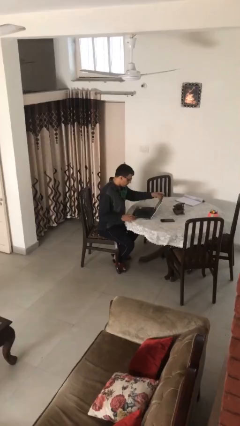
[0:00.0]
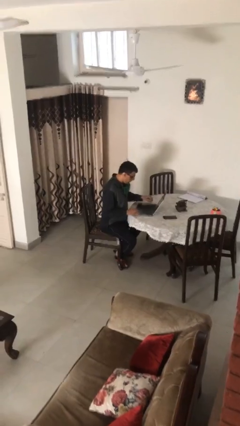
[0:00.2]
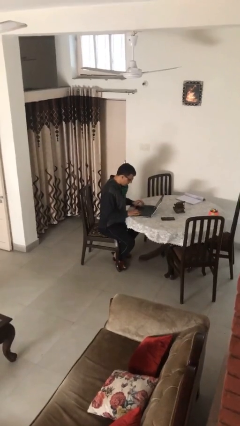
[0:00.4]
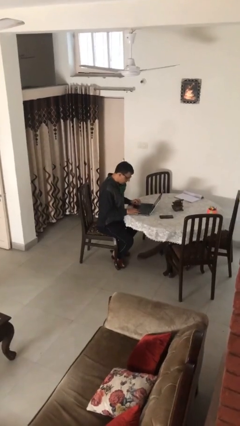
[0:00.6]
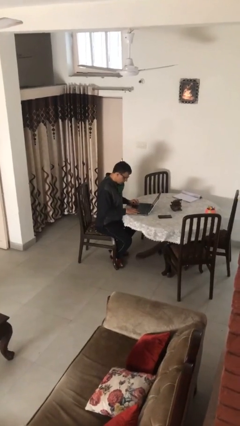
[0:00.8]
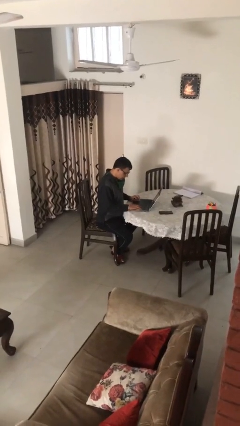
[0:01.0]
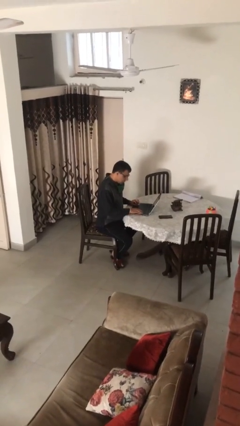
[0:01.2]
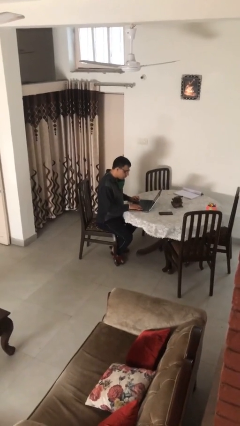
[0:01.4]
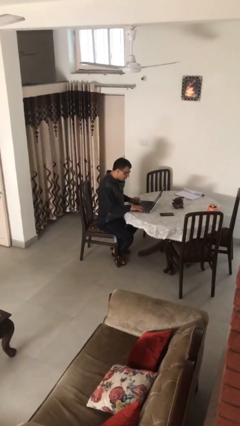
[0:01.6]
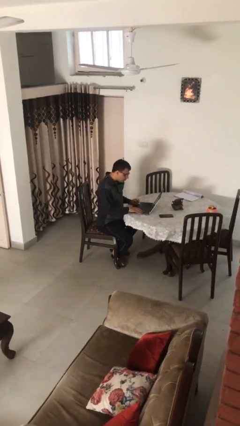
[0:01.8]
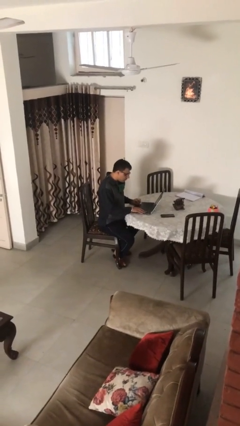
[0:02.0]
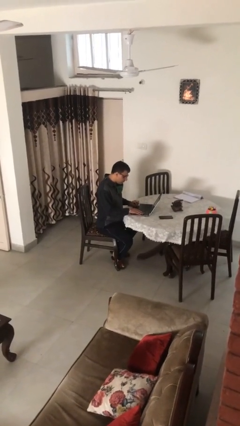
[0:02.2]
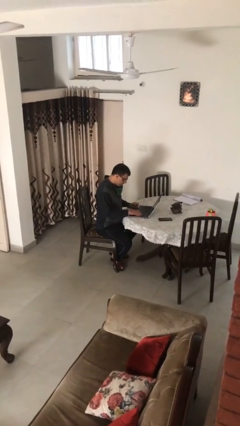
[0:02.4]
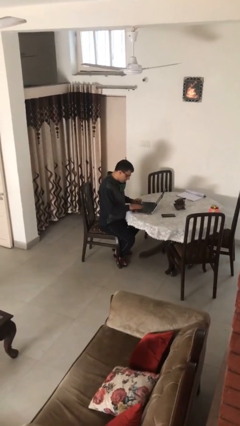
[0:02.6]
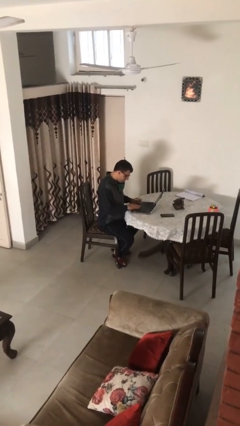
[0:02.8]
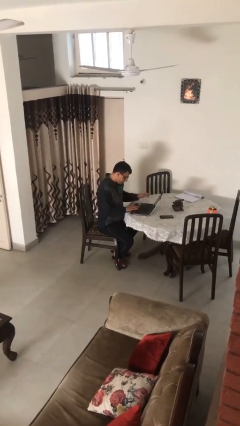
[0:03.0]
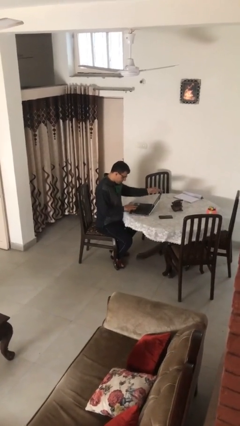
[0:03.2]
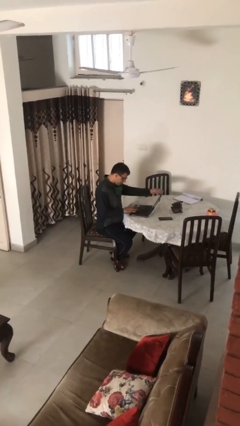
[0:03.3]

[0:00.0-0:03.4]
person interacts with laptop

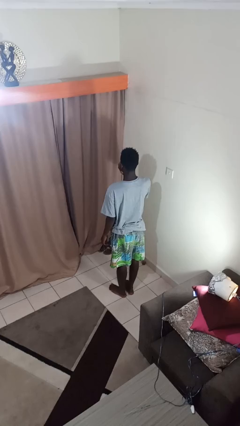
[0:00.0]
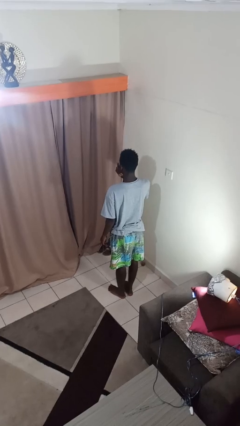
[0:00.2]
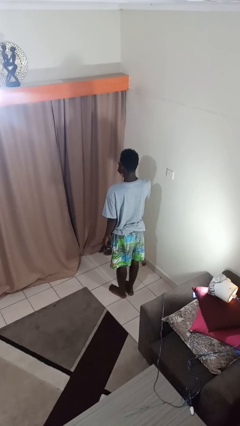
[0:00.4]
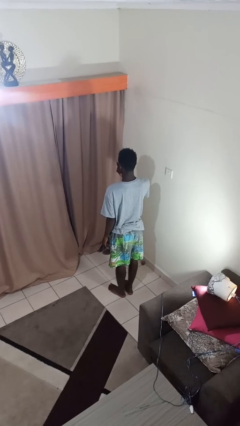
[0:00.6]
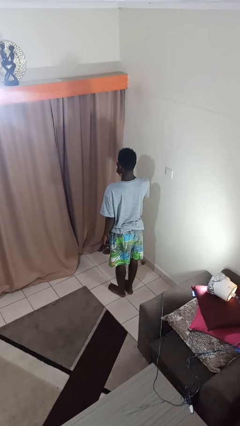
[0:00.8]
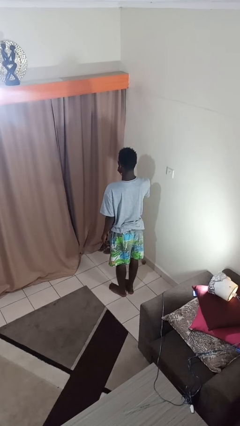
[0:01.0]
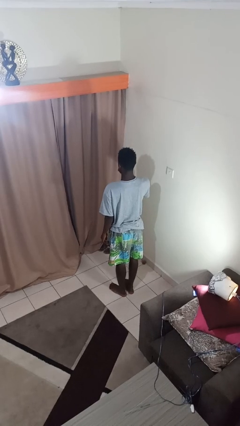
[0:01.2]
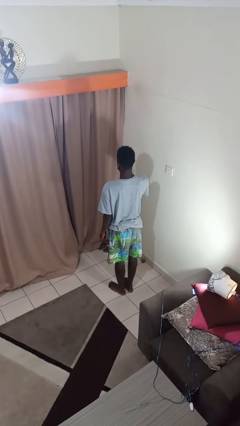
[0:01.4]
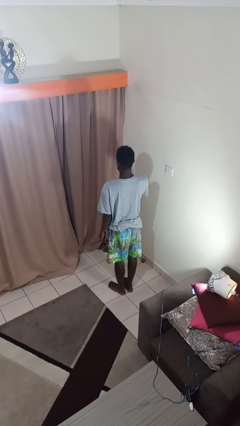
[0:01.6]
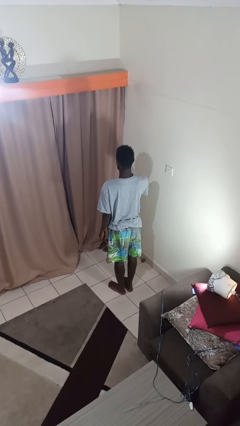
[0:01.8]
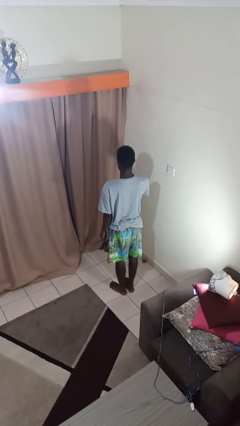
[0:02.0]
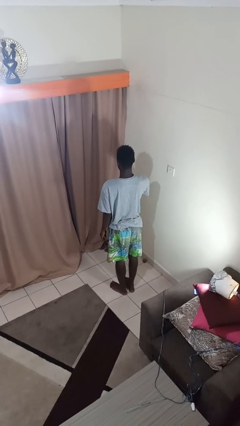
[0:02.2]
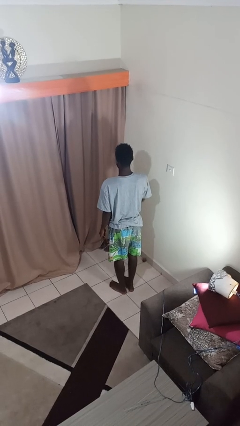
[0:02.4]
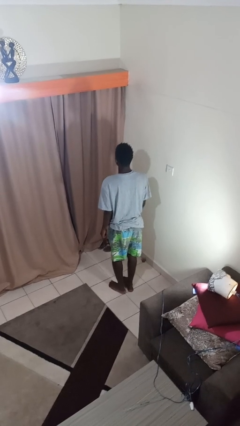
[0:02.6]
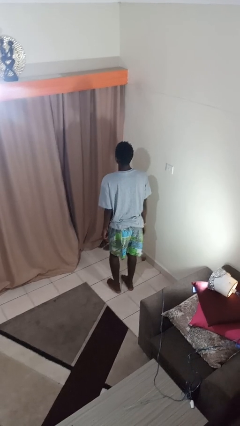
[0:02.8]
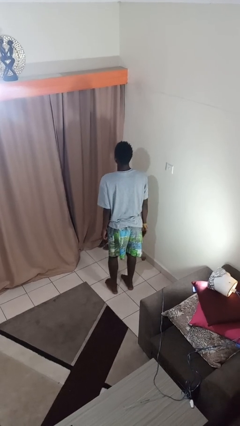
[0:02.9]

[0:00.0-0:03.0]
person gestures number three

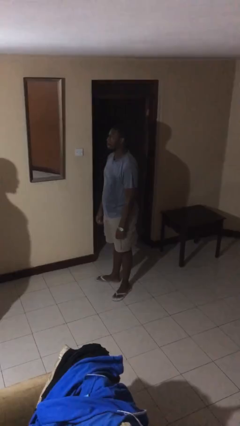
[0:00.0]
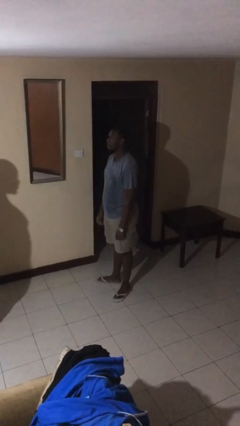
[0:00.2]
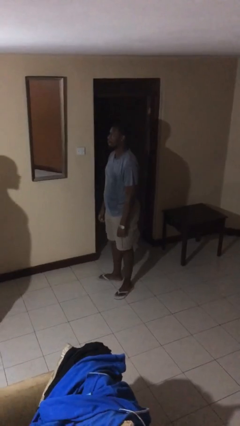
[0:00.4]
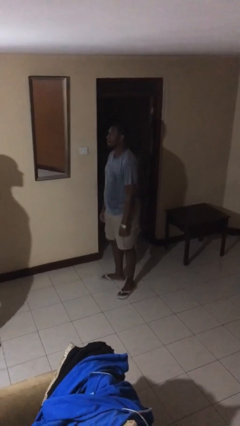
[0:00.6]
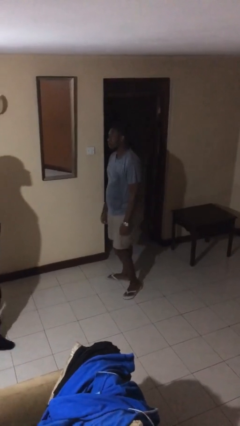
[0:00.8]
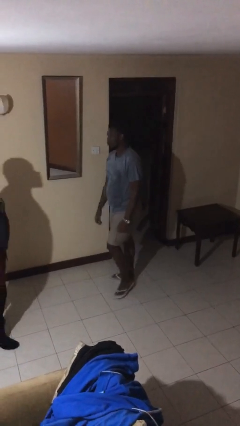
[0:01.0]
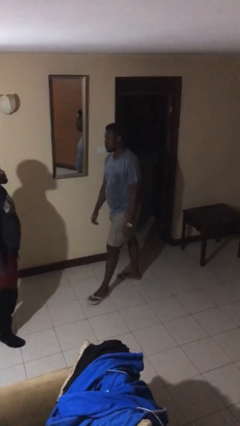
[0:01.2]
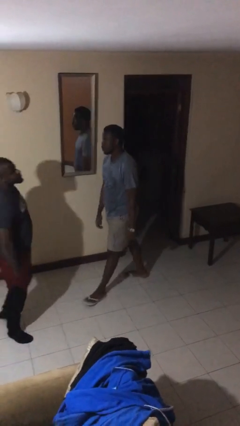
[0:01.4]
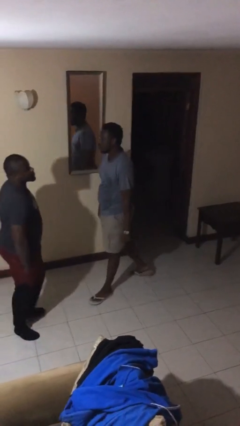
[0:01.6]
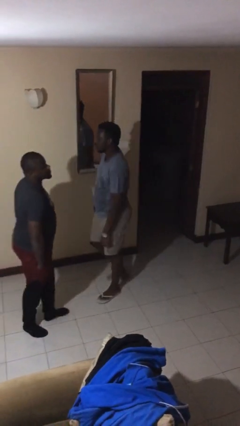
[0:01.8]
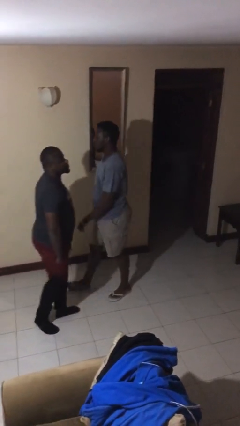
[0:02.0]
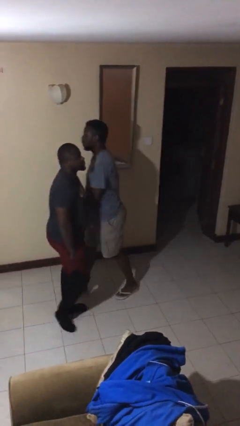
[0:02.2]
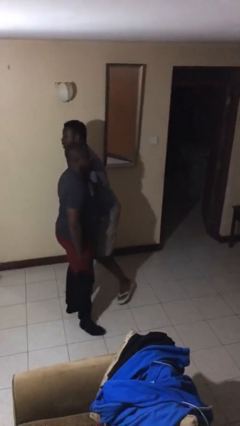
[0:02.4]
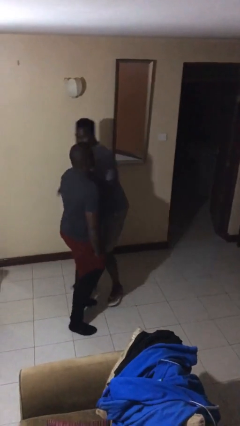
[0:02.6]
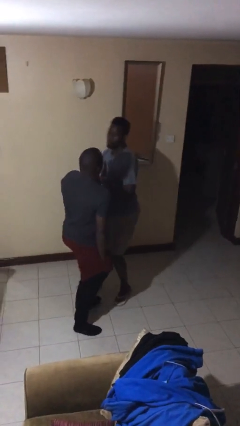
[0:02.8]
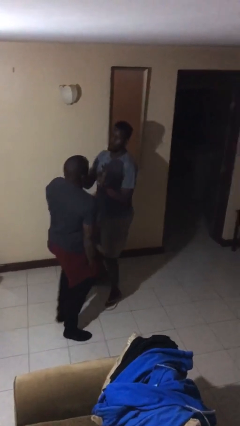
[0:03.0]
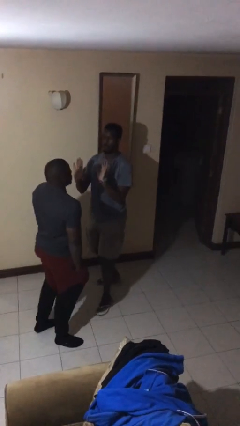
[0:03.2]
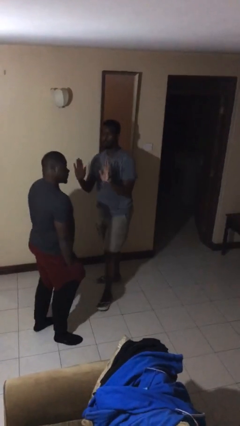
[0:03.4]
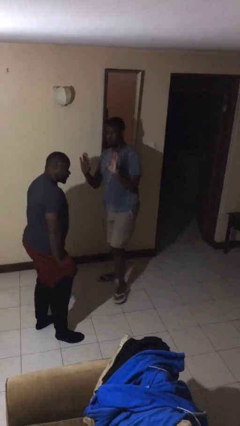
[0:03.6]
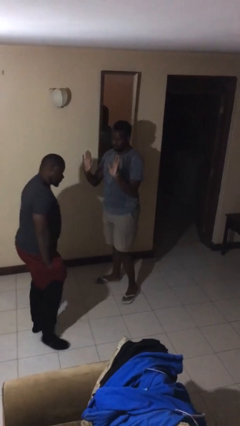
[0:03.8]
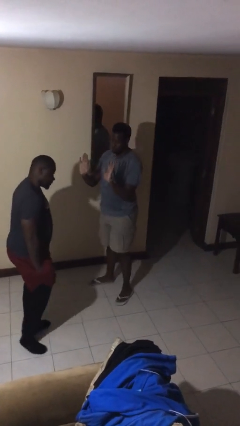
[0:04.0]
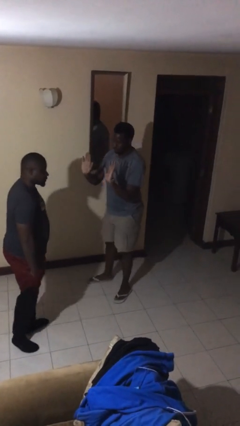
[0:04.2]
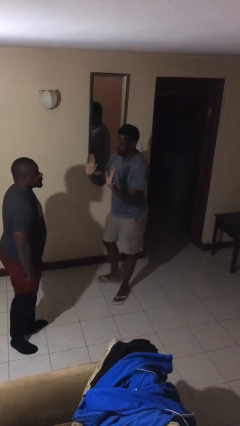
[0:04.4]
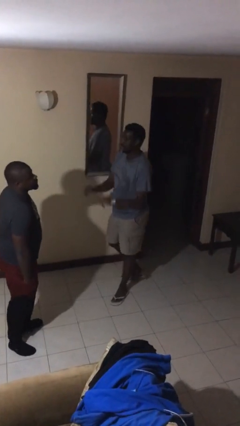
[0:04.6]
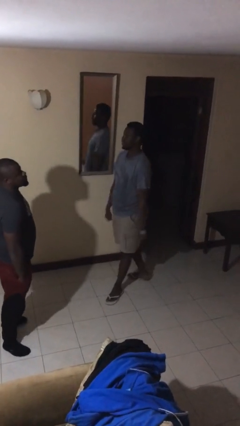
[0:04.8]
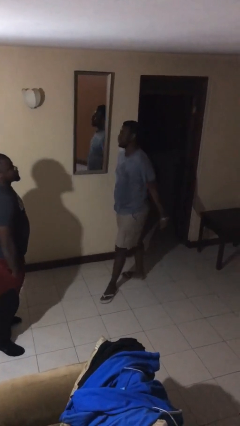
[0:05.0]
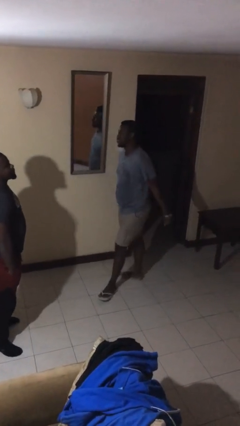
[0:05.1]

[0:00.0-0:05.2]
person bumps into person

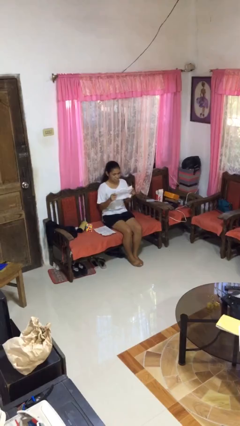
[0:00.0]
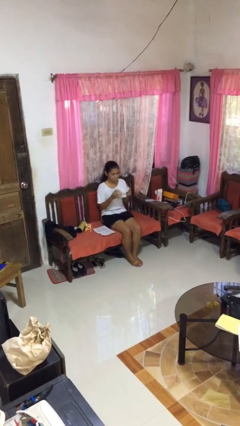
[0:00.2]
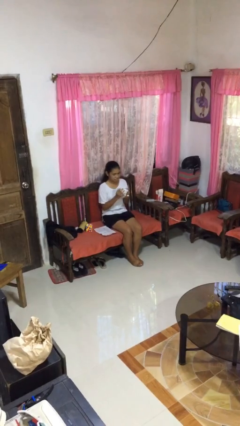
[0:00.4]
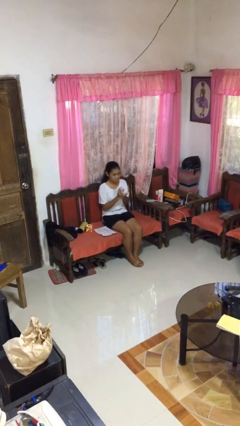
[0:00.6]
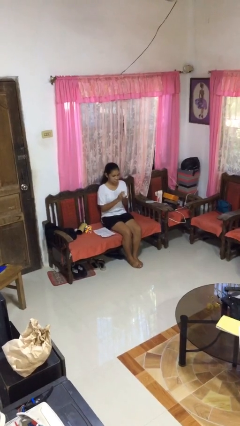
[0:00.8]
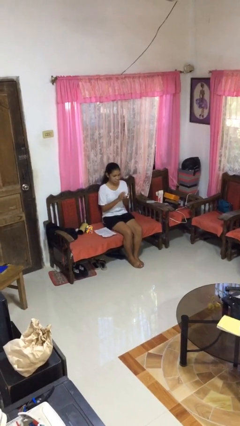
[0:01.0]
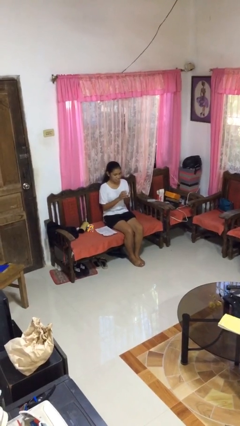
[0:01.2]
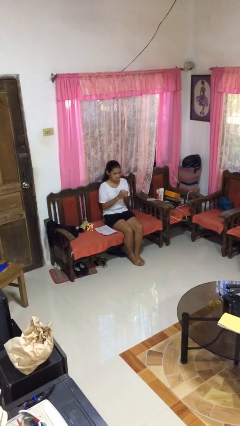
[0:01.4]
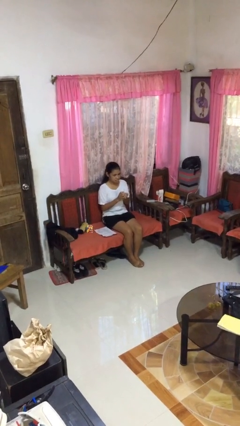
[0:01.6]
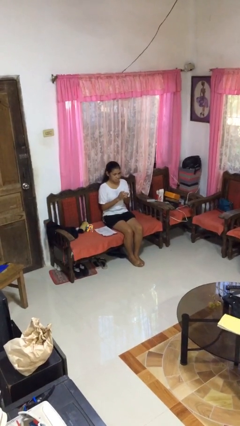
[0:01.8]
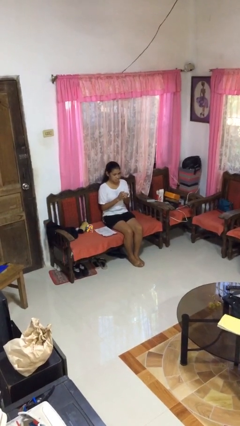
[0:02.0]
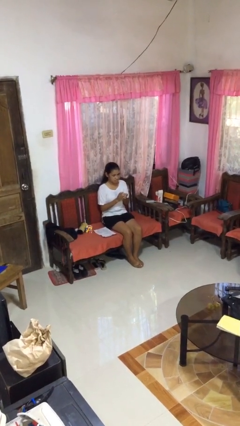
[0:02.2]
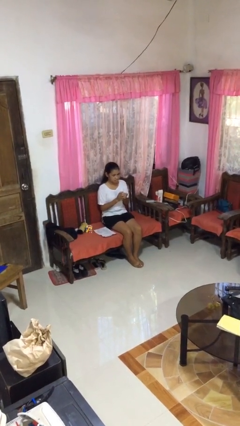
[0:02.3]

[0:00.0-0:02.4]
person crumples paper

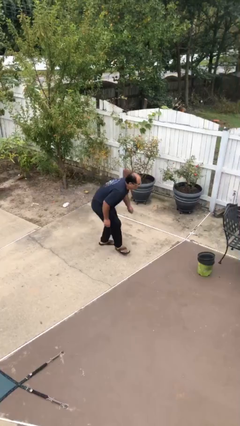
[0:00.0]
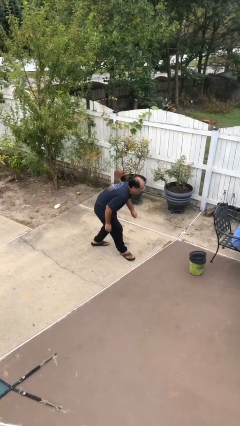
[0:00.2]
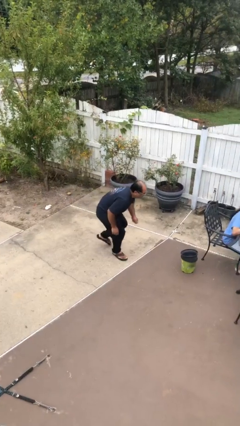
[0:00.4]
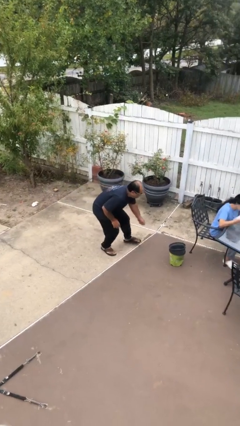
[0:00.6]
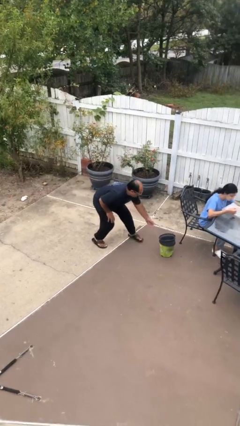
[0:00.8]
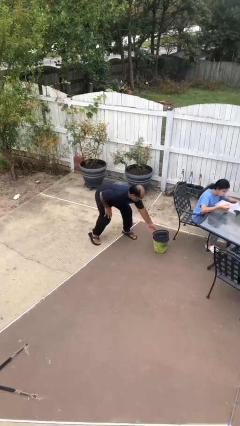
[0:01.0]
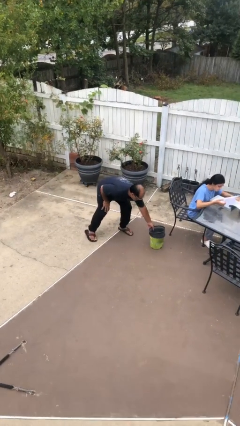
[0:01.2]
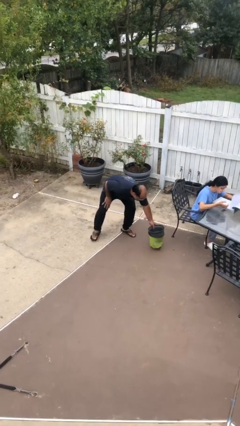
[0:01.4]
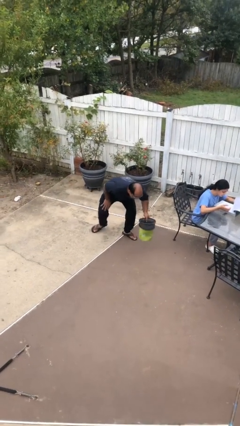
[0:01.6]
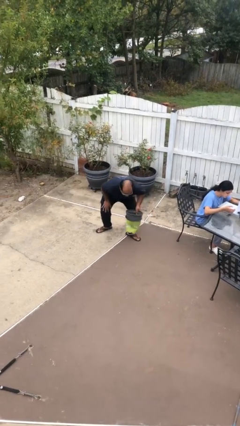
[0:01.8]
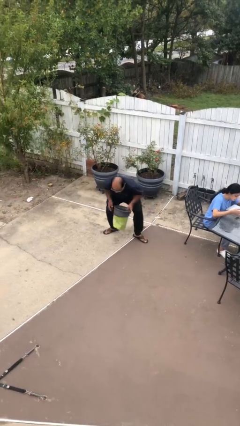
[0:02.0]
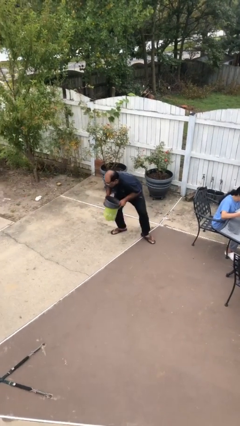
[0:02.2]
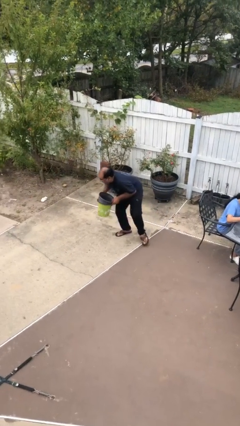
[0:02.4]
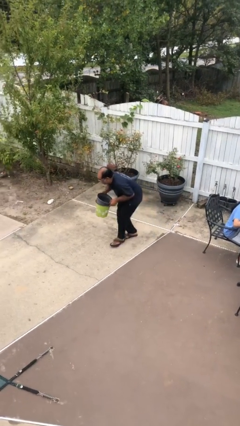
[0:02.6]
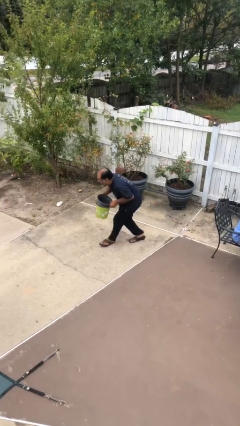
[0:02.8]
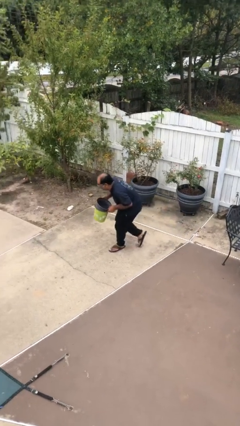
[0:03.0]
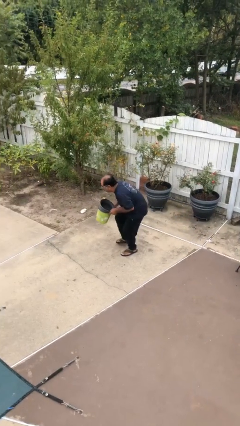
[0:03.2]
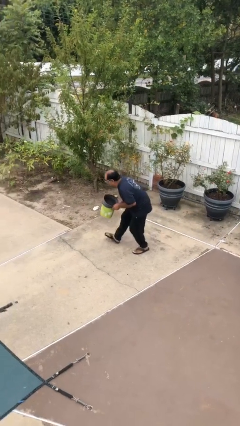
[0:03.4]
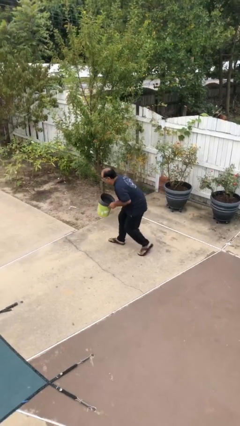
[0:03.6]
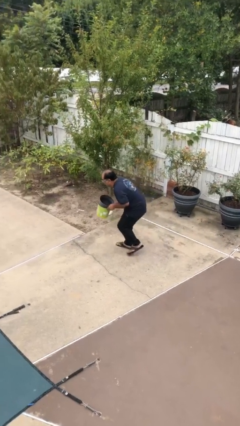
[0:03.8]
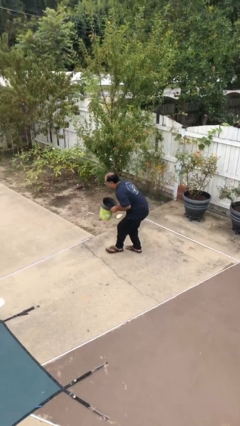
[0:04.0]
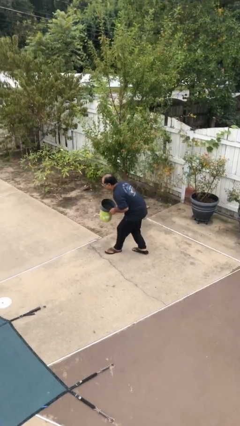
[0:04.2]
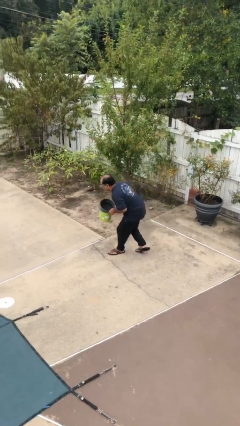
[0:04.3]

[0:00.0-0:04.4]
person steals object from person
